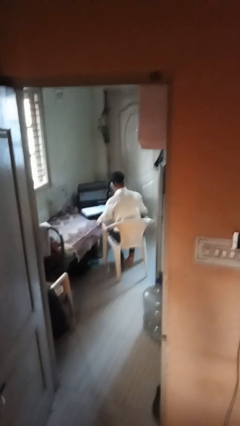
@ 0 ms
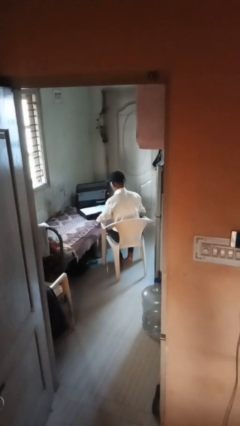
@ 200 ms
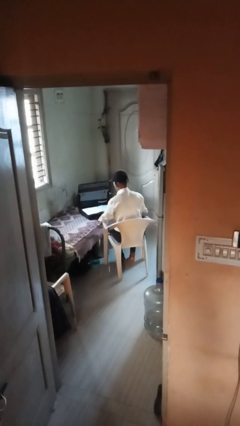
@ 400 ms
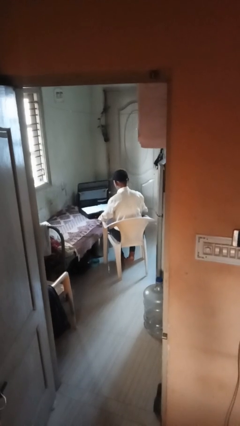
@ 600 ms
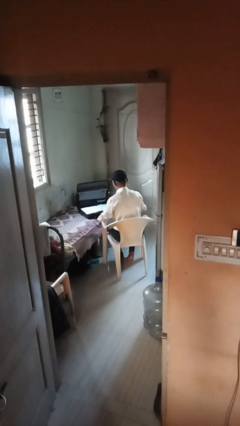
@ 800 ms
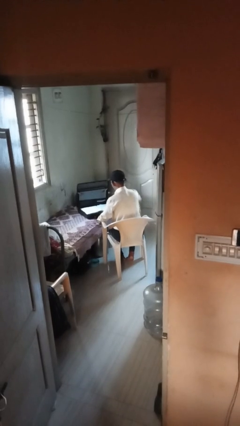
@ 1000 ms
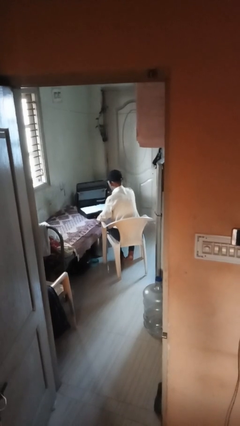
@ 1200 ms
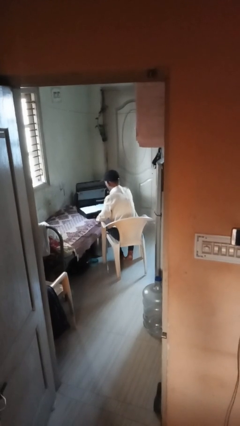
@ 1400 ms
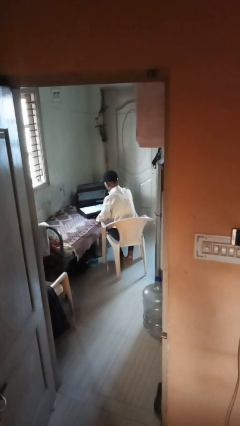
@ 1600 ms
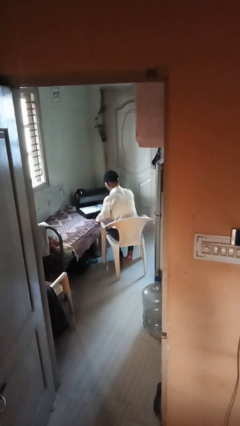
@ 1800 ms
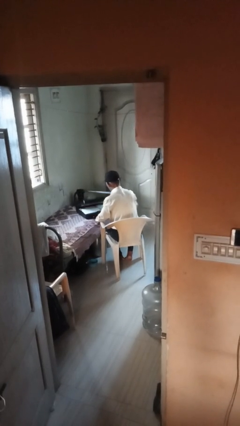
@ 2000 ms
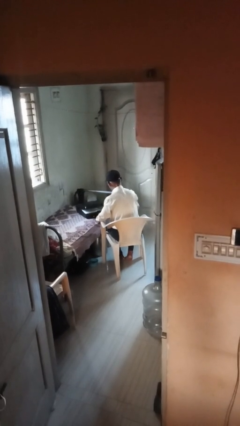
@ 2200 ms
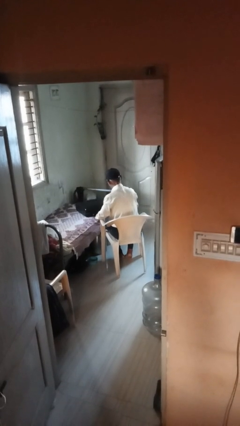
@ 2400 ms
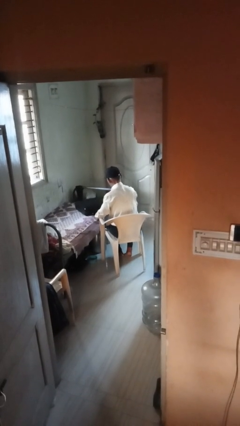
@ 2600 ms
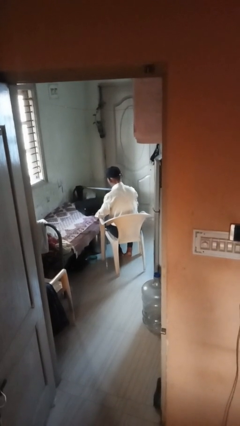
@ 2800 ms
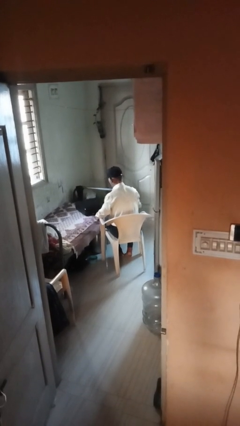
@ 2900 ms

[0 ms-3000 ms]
person closes suitcase

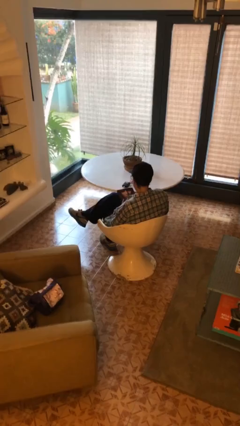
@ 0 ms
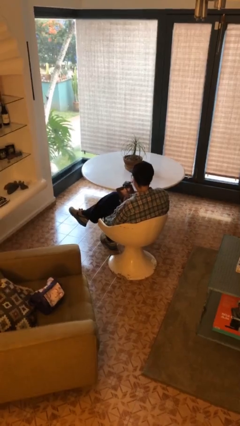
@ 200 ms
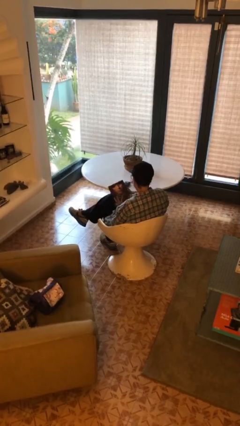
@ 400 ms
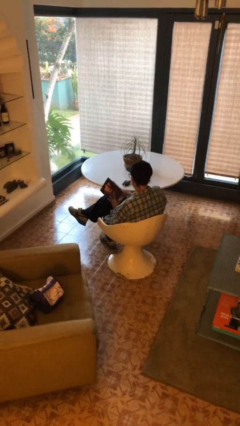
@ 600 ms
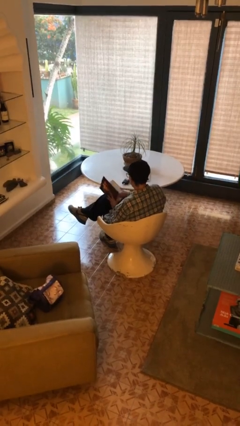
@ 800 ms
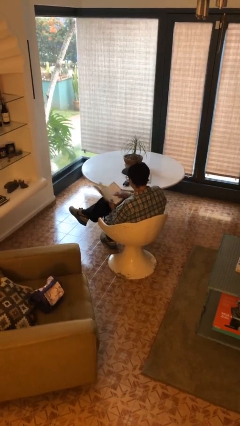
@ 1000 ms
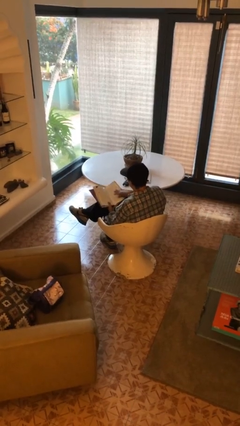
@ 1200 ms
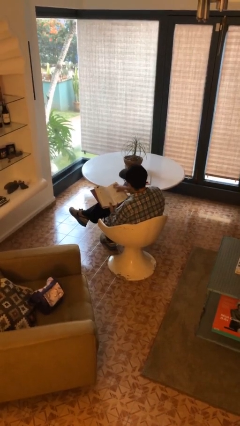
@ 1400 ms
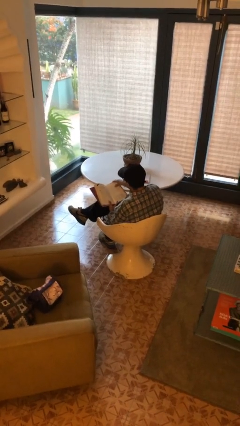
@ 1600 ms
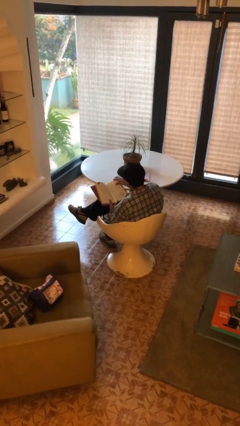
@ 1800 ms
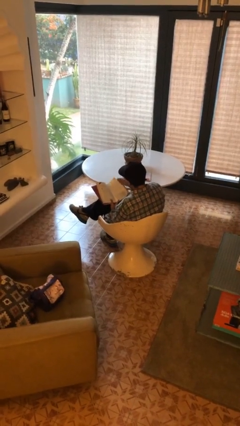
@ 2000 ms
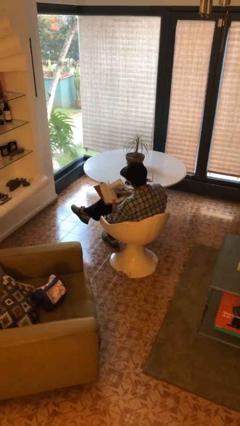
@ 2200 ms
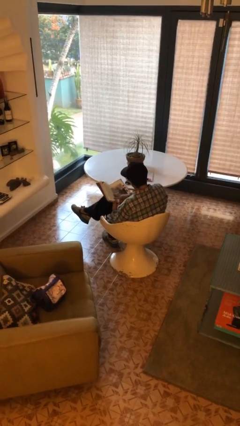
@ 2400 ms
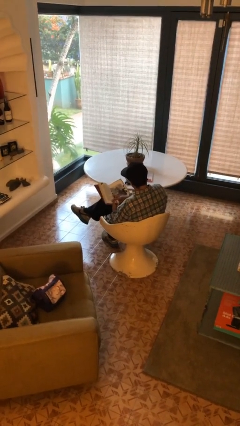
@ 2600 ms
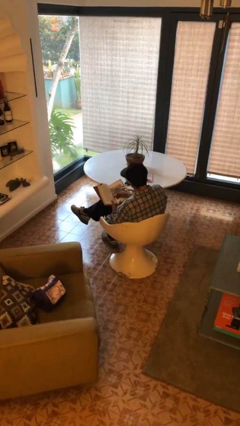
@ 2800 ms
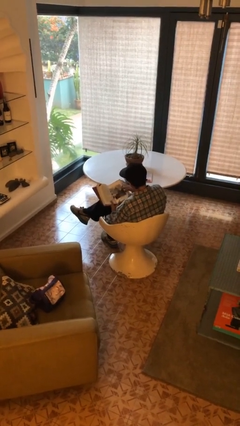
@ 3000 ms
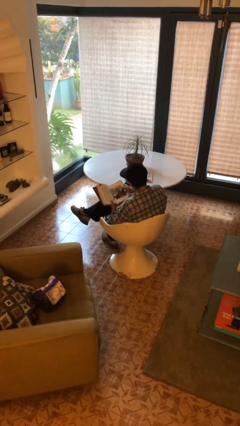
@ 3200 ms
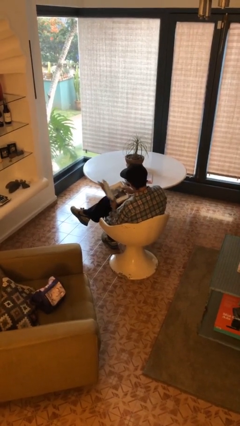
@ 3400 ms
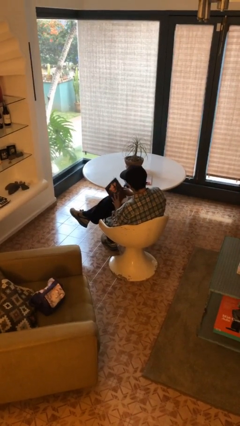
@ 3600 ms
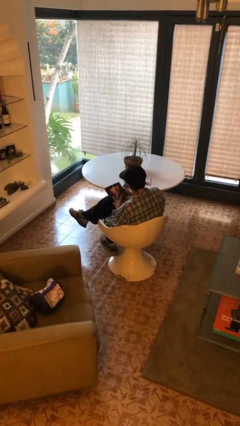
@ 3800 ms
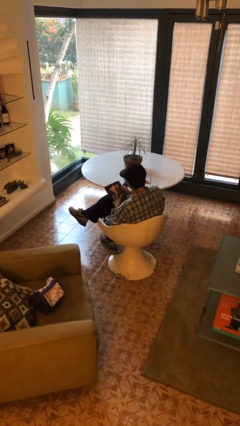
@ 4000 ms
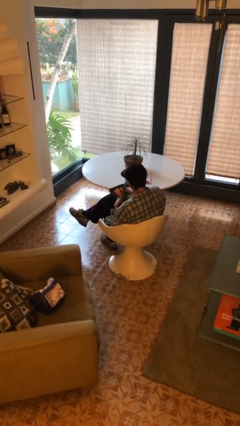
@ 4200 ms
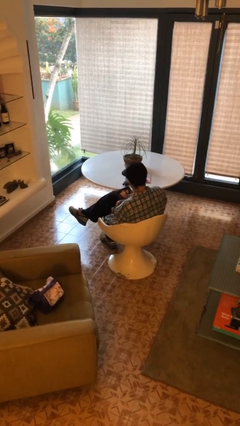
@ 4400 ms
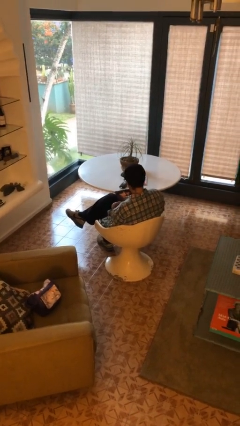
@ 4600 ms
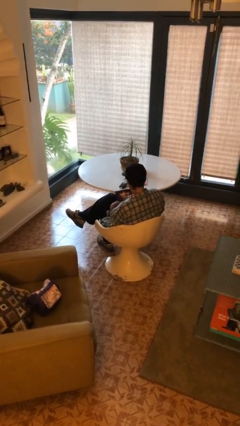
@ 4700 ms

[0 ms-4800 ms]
person reads book

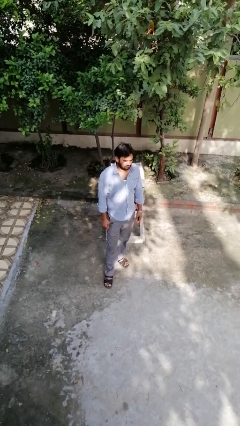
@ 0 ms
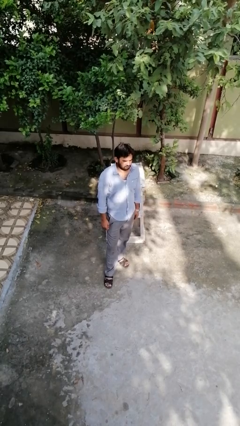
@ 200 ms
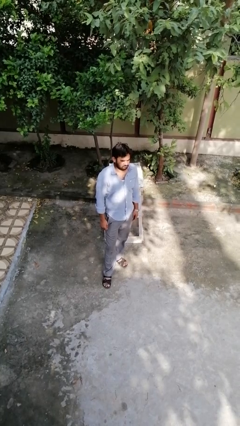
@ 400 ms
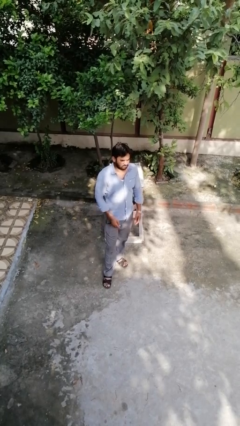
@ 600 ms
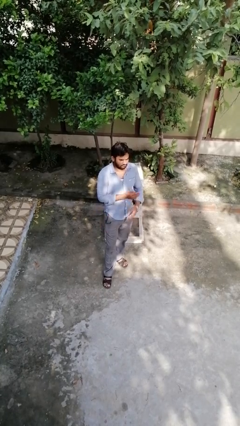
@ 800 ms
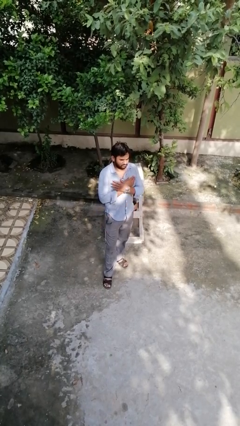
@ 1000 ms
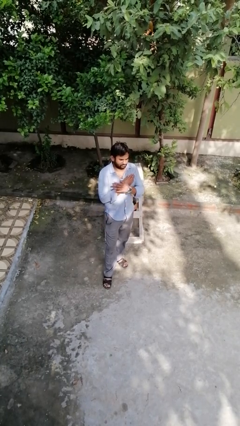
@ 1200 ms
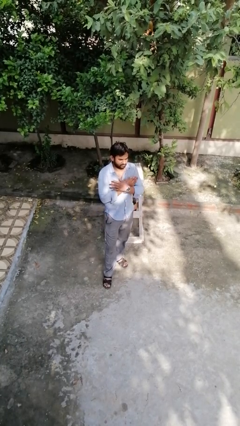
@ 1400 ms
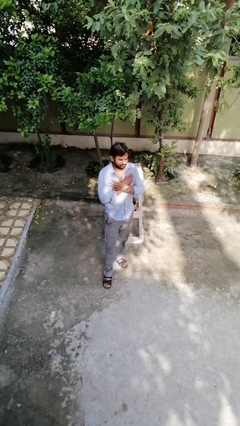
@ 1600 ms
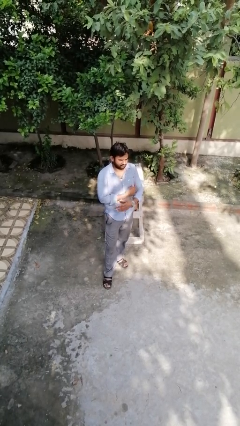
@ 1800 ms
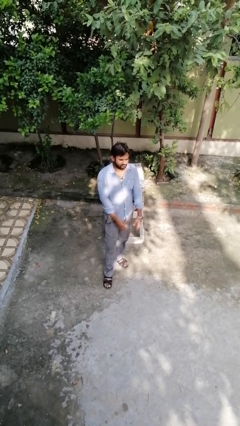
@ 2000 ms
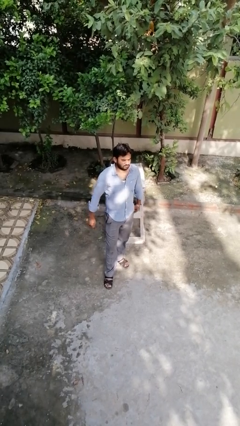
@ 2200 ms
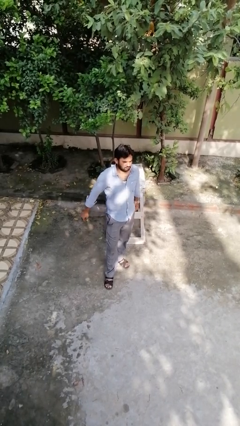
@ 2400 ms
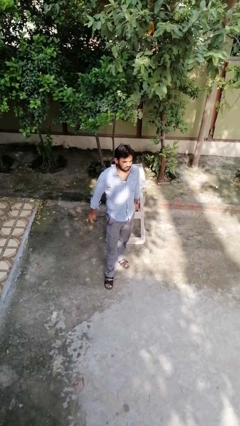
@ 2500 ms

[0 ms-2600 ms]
person drums on chest

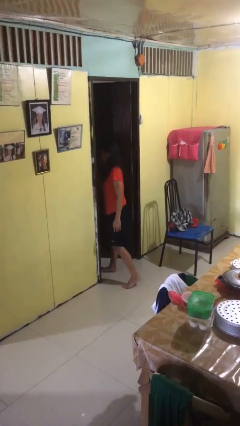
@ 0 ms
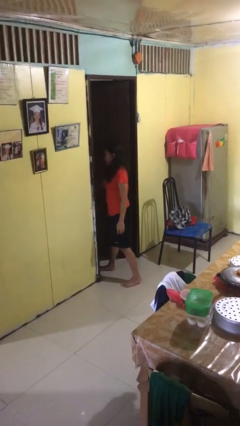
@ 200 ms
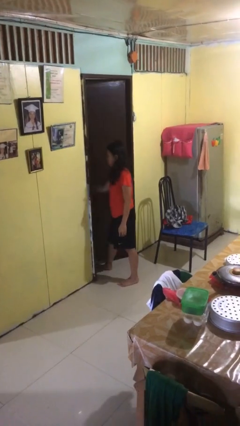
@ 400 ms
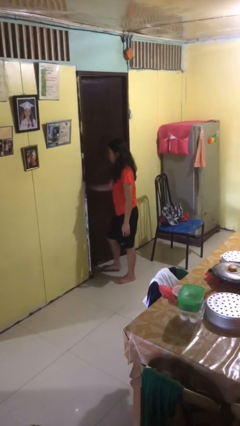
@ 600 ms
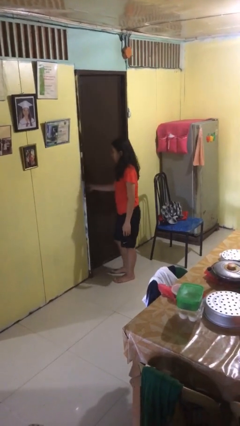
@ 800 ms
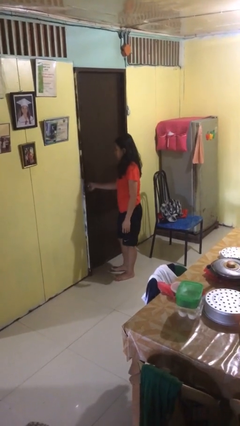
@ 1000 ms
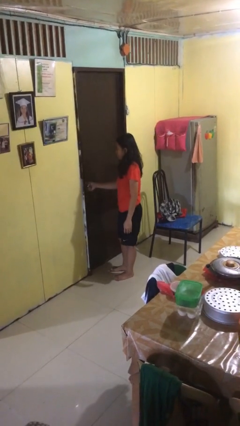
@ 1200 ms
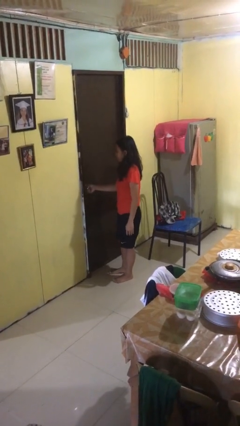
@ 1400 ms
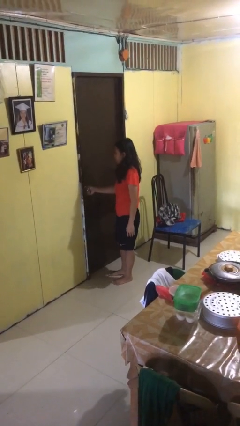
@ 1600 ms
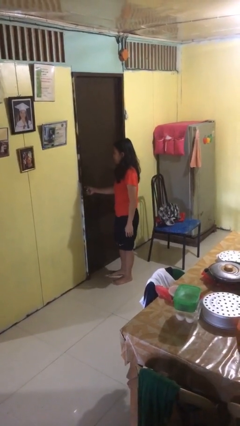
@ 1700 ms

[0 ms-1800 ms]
person closes facility door

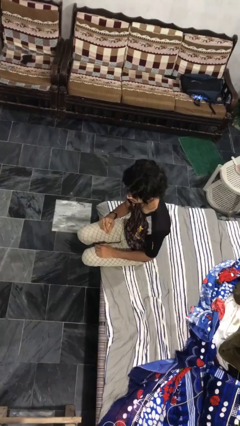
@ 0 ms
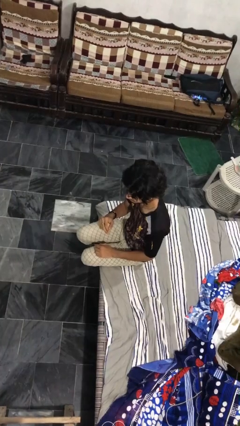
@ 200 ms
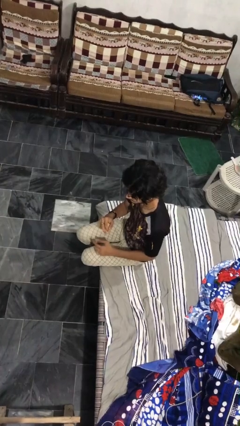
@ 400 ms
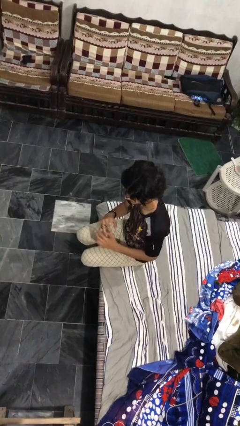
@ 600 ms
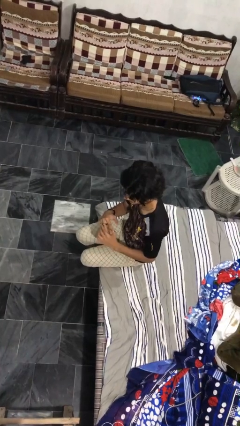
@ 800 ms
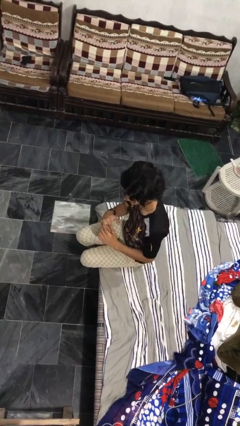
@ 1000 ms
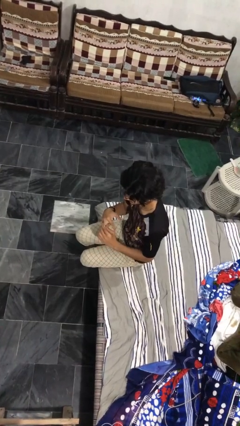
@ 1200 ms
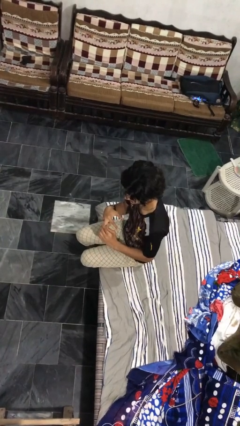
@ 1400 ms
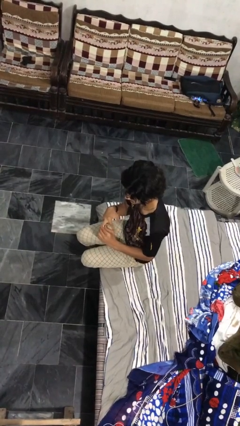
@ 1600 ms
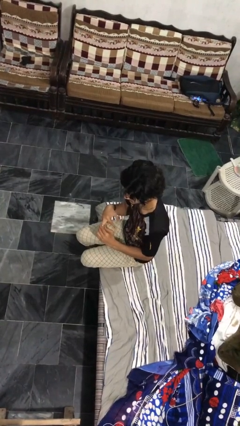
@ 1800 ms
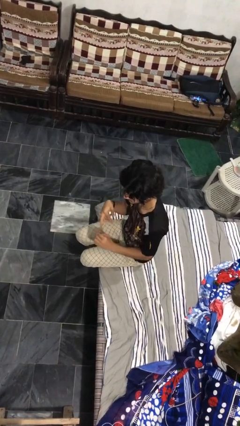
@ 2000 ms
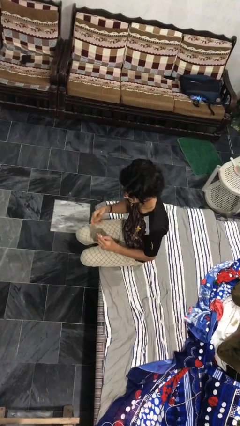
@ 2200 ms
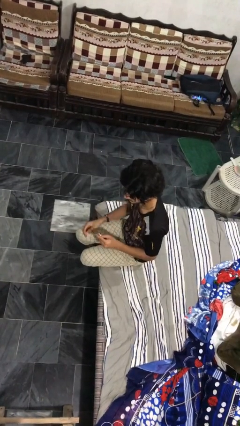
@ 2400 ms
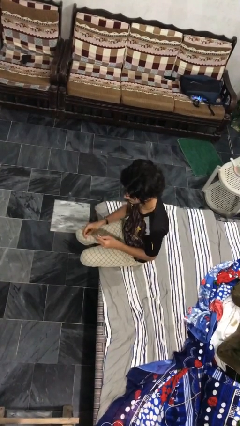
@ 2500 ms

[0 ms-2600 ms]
person takes off ring

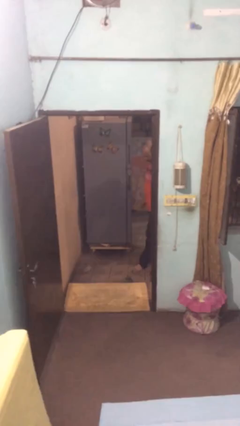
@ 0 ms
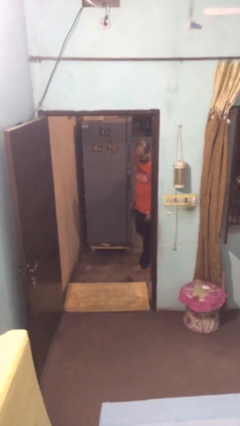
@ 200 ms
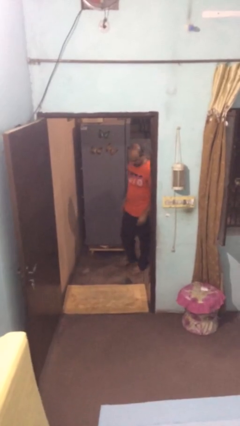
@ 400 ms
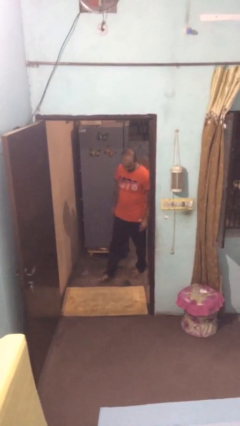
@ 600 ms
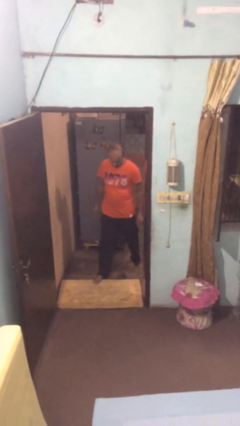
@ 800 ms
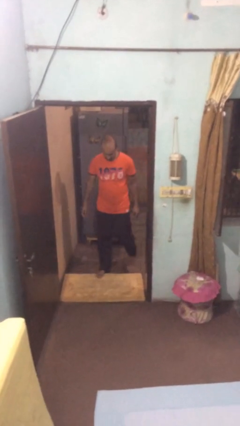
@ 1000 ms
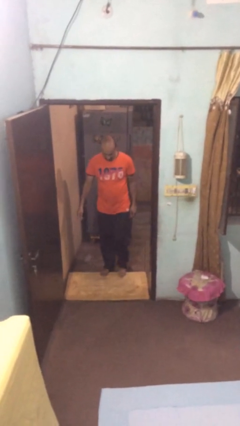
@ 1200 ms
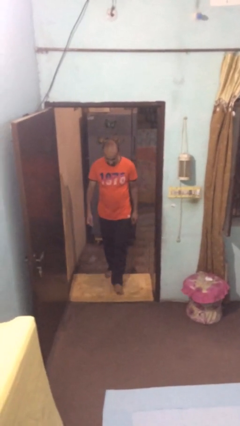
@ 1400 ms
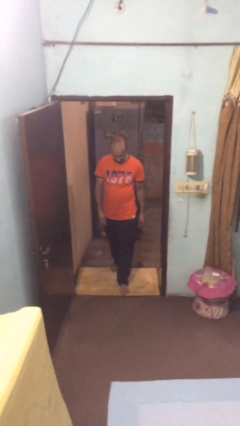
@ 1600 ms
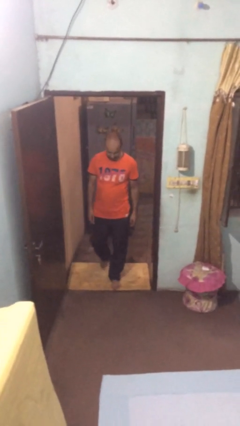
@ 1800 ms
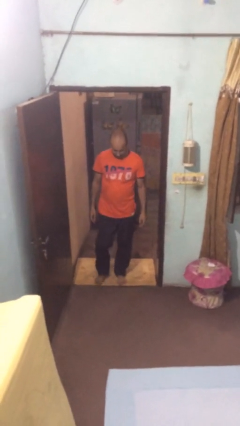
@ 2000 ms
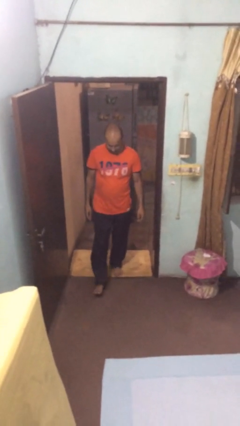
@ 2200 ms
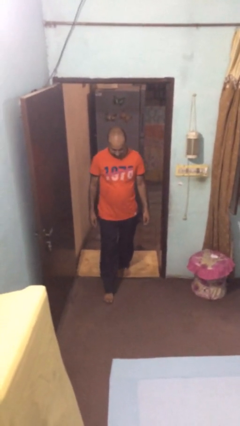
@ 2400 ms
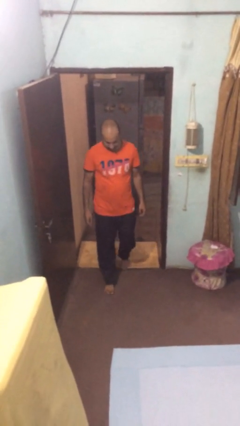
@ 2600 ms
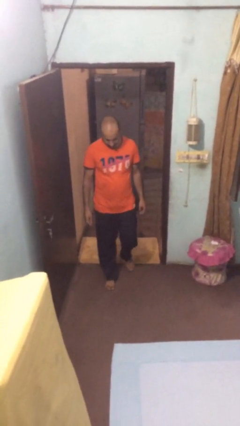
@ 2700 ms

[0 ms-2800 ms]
person enters scene through structure
